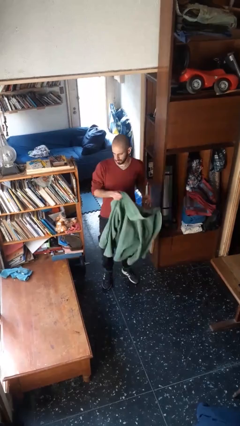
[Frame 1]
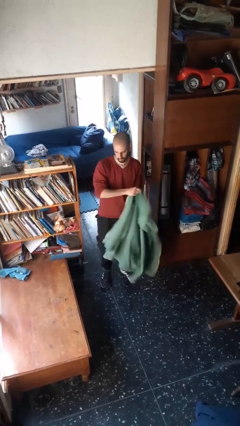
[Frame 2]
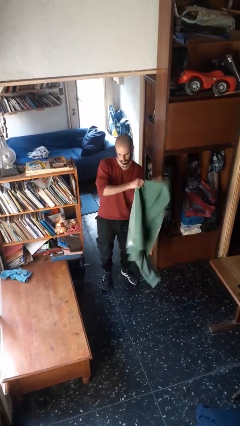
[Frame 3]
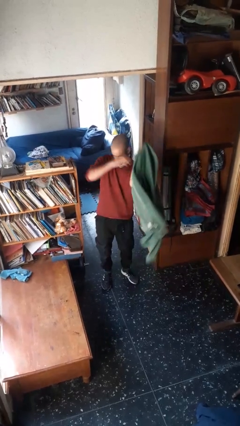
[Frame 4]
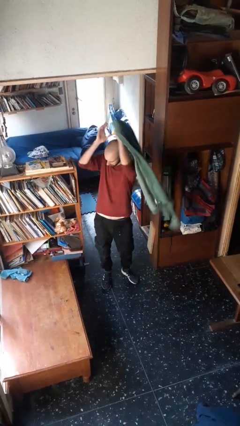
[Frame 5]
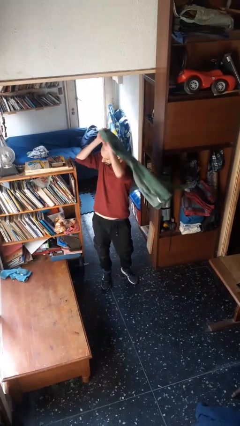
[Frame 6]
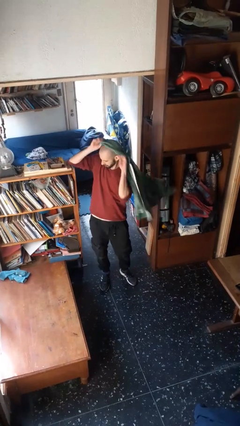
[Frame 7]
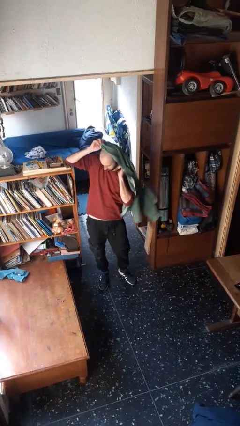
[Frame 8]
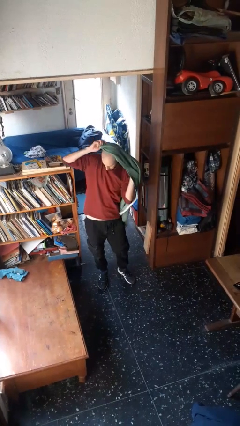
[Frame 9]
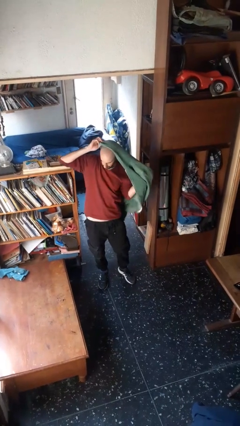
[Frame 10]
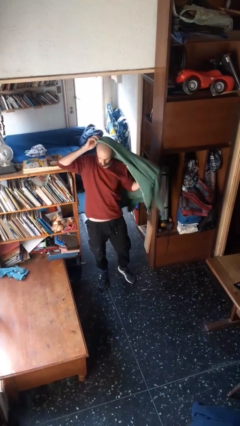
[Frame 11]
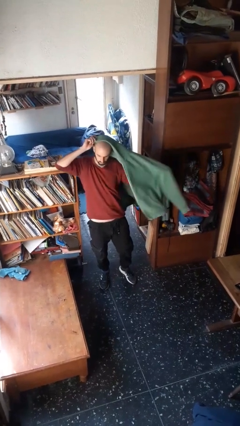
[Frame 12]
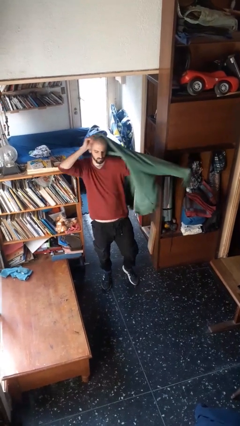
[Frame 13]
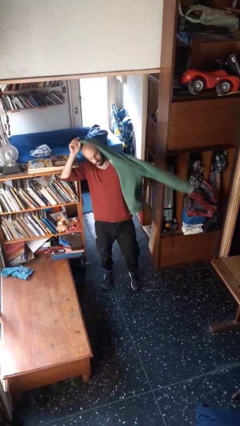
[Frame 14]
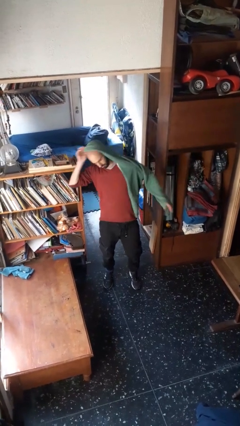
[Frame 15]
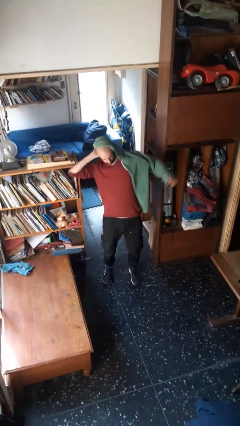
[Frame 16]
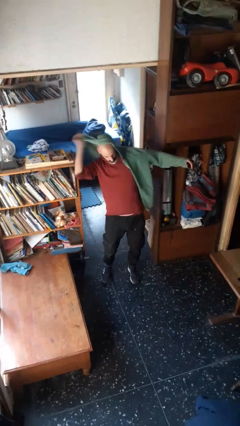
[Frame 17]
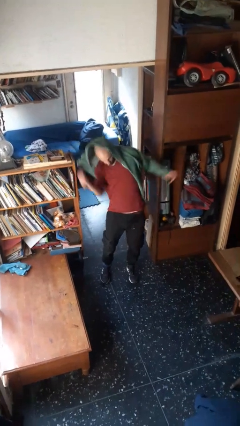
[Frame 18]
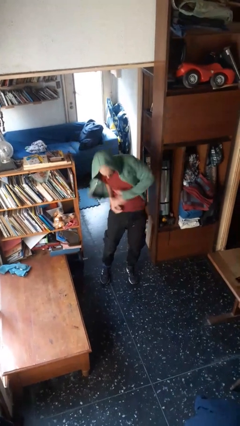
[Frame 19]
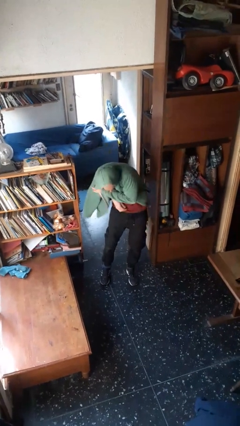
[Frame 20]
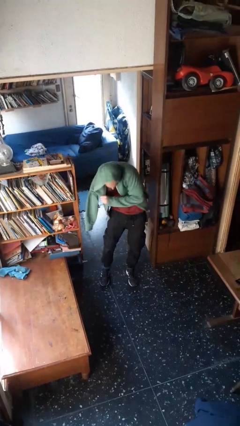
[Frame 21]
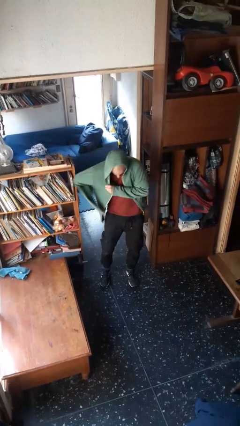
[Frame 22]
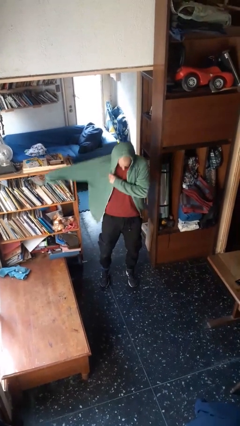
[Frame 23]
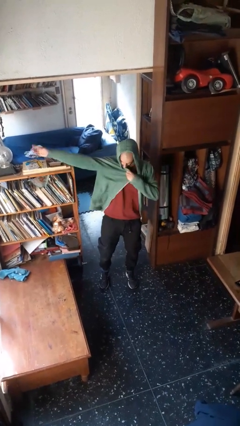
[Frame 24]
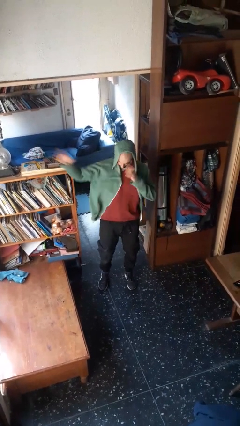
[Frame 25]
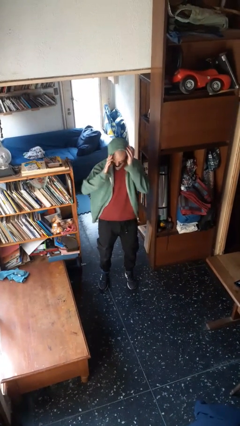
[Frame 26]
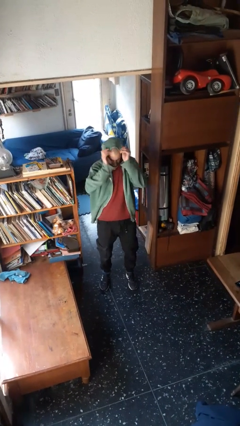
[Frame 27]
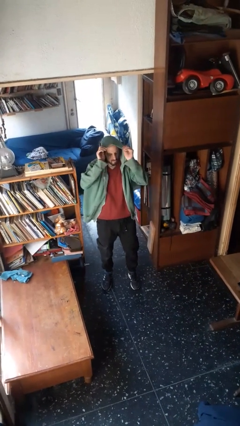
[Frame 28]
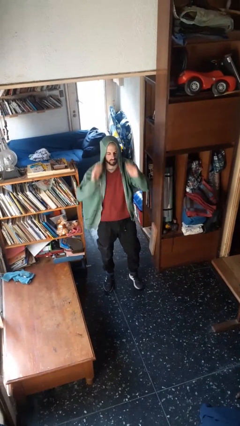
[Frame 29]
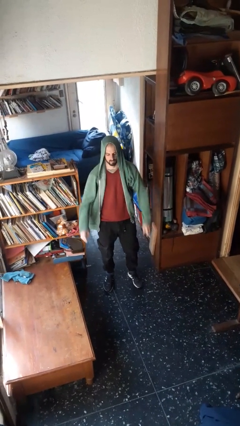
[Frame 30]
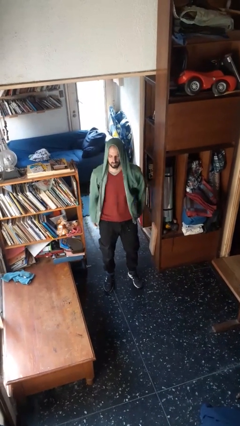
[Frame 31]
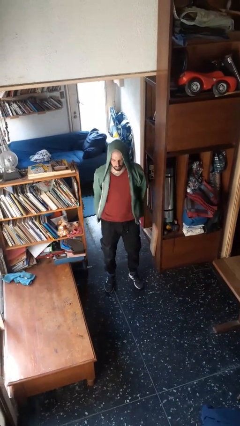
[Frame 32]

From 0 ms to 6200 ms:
person puts on hoodie

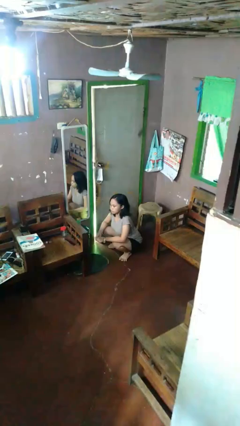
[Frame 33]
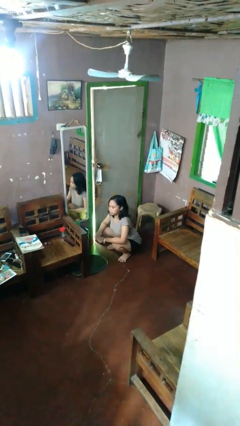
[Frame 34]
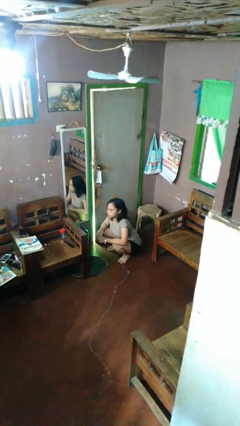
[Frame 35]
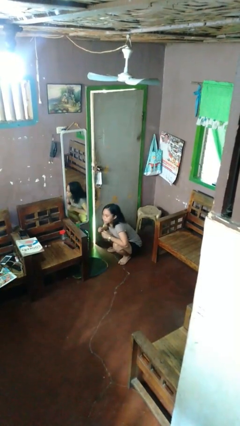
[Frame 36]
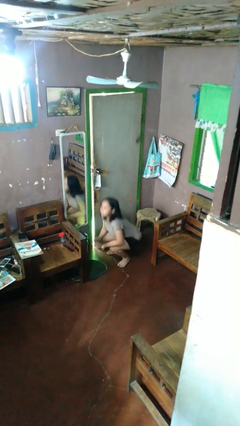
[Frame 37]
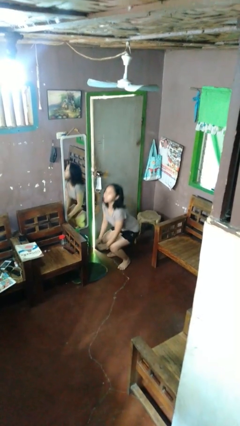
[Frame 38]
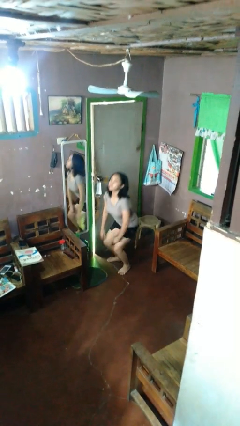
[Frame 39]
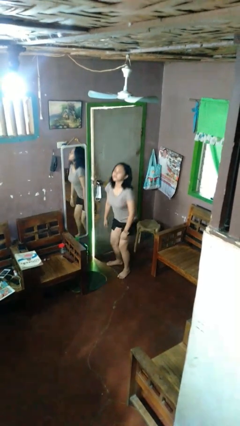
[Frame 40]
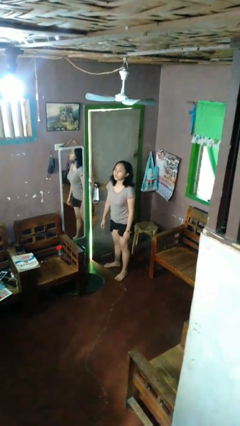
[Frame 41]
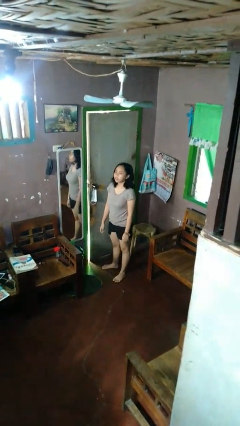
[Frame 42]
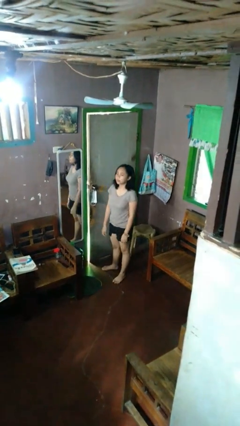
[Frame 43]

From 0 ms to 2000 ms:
person stands up

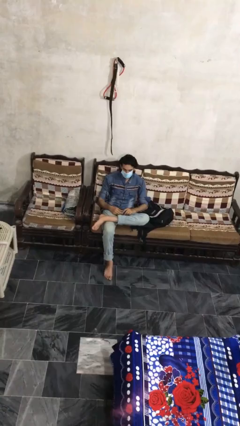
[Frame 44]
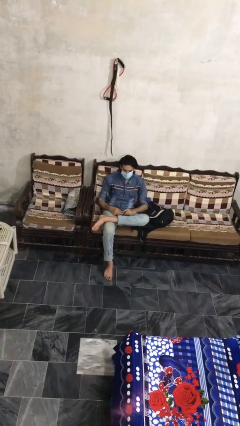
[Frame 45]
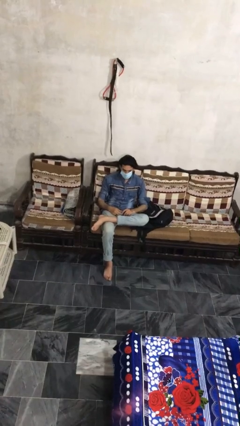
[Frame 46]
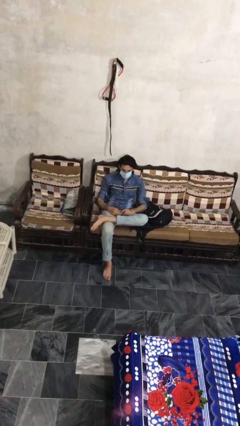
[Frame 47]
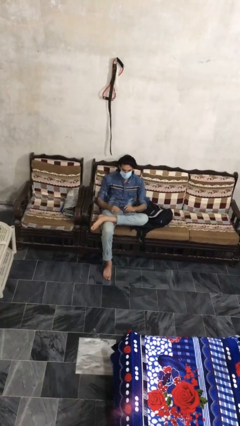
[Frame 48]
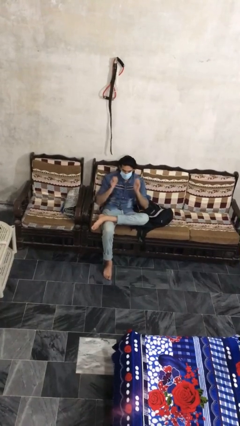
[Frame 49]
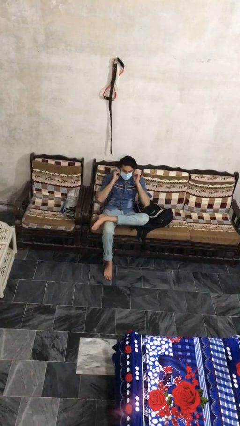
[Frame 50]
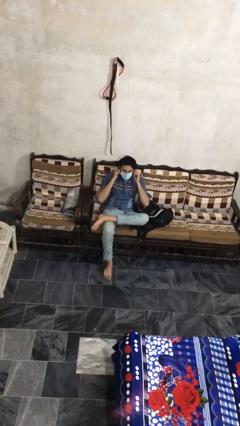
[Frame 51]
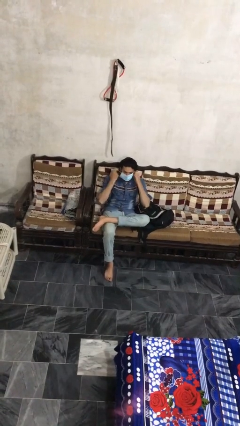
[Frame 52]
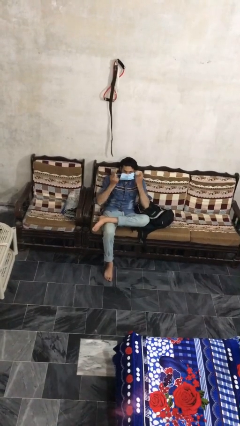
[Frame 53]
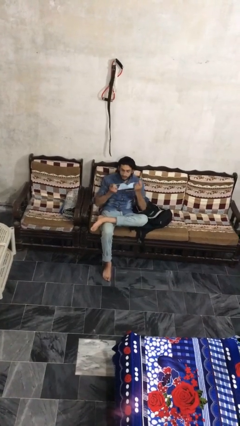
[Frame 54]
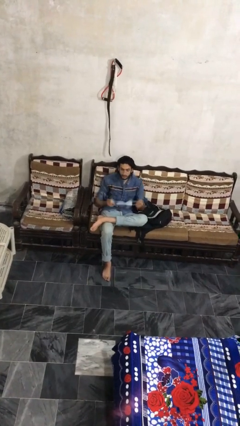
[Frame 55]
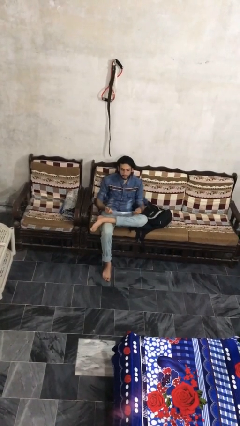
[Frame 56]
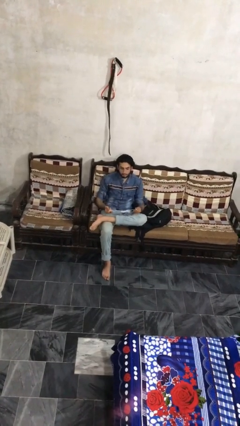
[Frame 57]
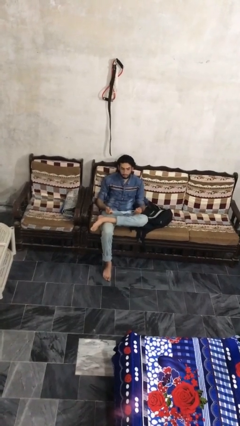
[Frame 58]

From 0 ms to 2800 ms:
person takes off facemask

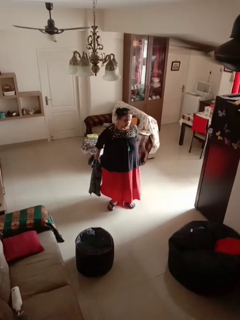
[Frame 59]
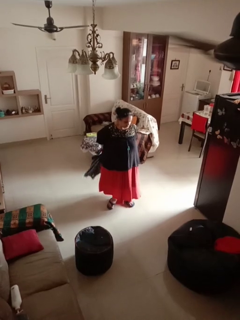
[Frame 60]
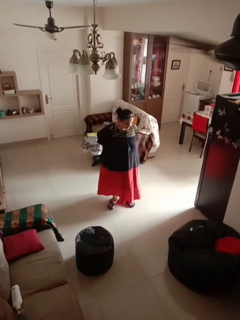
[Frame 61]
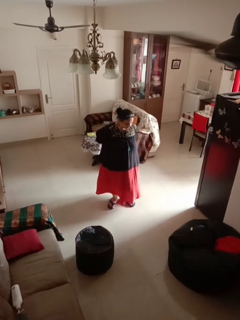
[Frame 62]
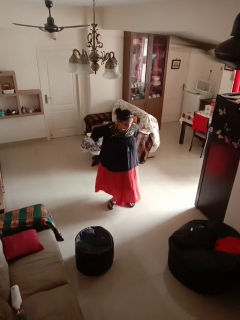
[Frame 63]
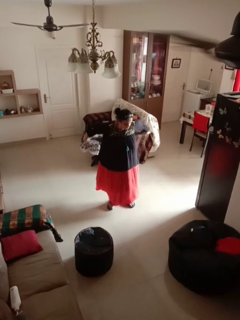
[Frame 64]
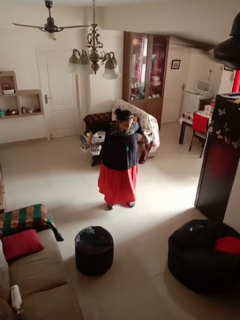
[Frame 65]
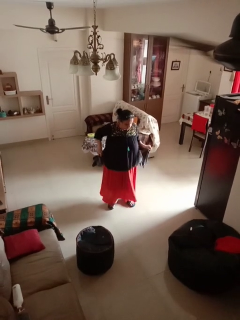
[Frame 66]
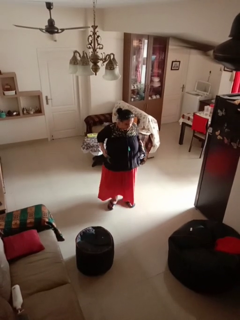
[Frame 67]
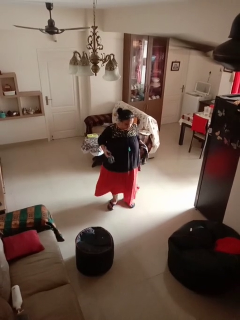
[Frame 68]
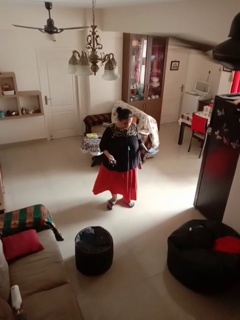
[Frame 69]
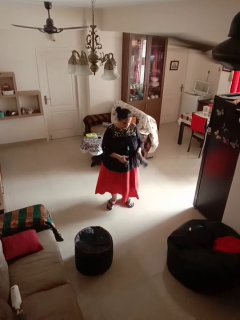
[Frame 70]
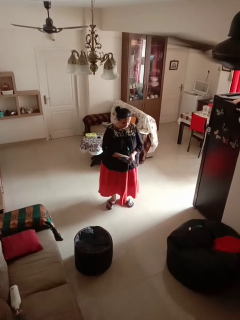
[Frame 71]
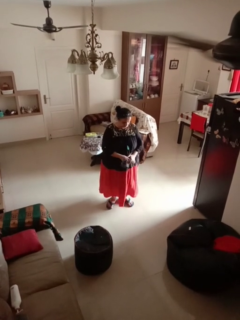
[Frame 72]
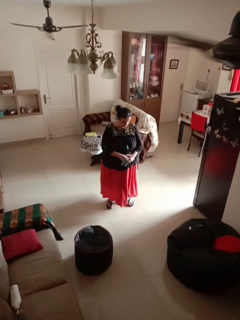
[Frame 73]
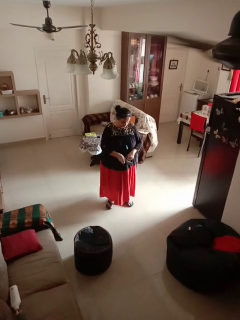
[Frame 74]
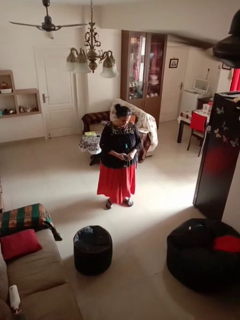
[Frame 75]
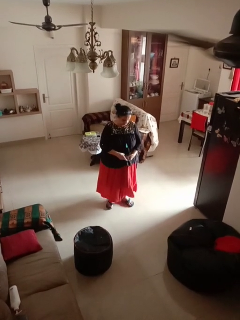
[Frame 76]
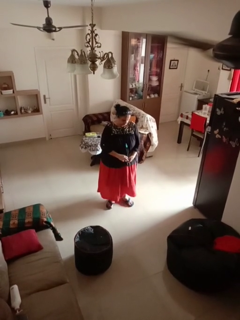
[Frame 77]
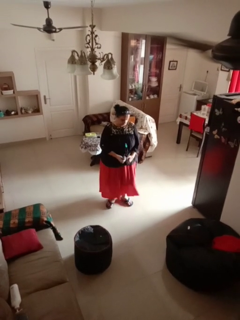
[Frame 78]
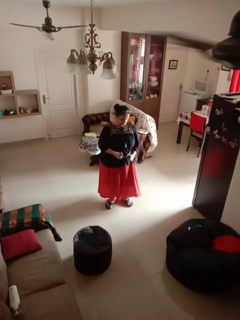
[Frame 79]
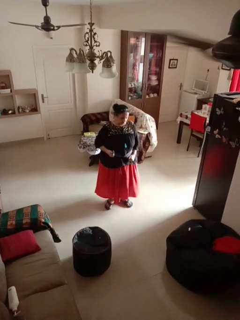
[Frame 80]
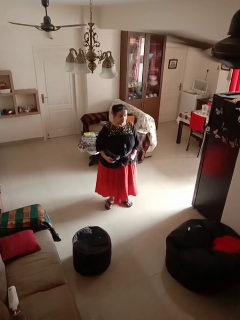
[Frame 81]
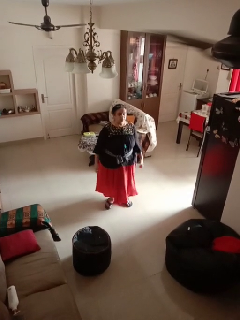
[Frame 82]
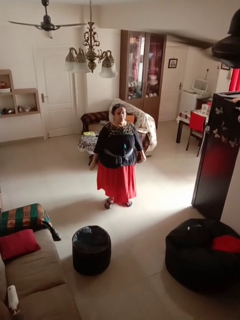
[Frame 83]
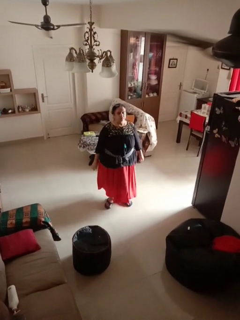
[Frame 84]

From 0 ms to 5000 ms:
person ties jacket around waist

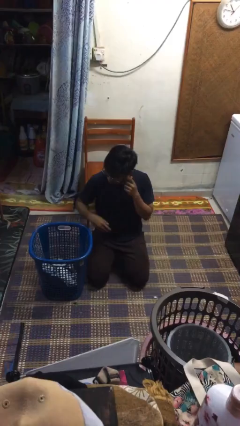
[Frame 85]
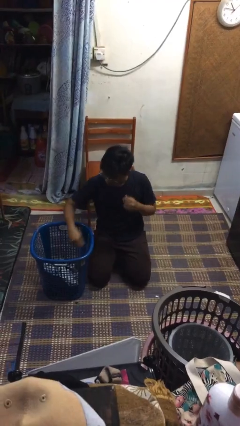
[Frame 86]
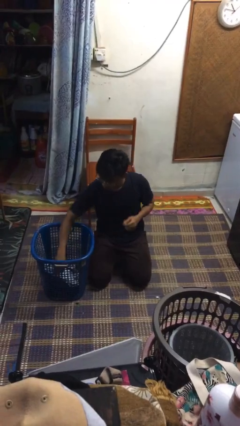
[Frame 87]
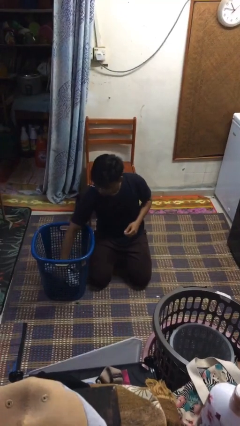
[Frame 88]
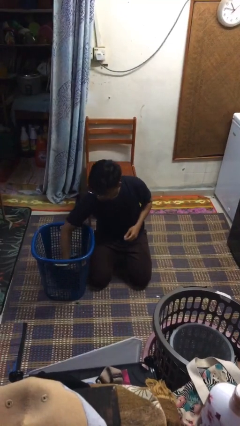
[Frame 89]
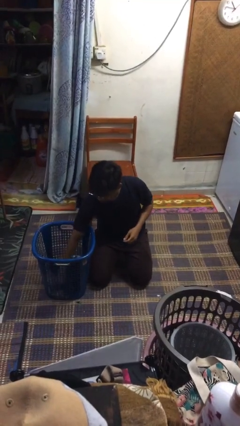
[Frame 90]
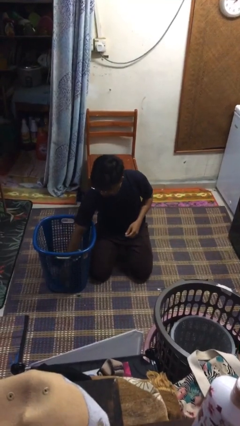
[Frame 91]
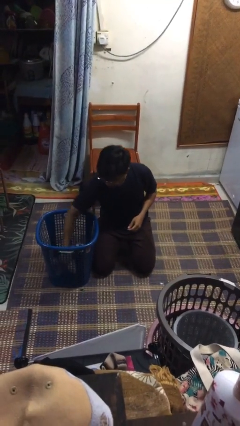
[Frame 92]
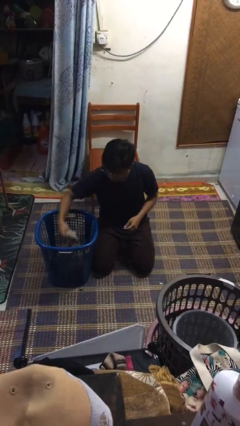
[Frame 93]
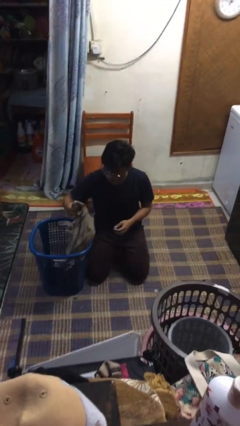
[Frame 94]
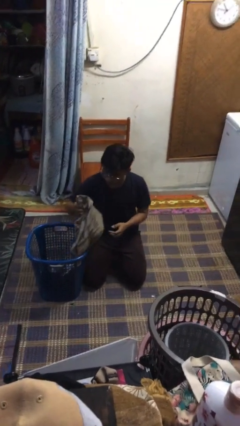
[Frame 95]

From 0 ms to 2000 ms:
person takes object from basket

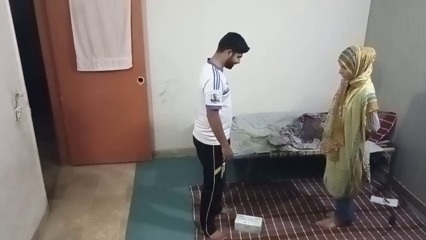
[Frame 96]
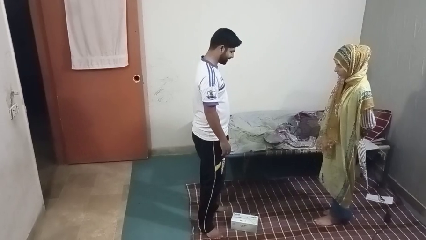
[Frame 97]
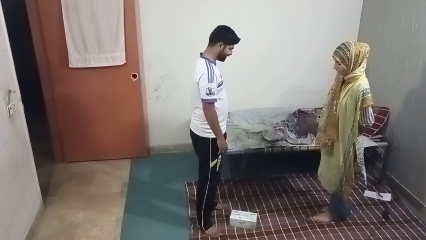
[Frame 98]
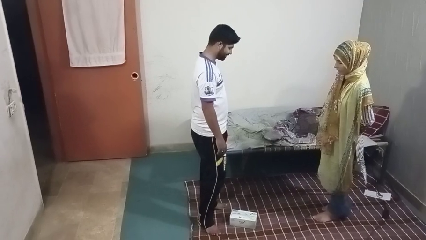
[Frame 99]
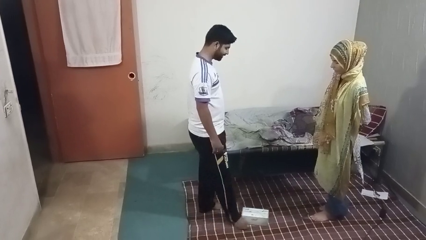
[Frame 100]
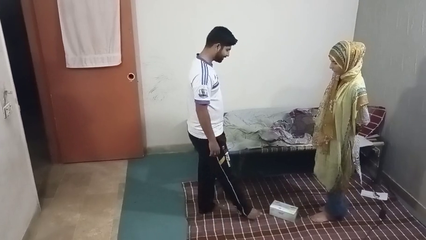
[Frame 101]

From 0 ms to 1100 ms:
person kicks object to person
